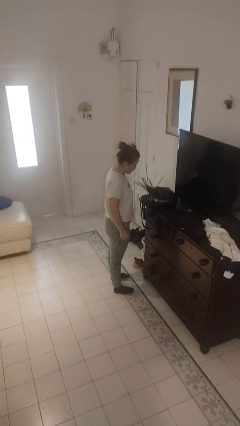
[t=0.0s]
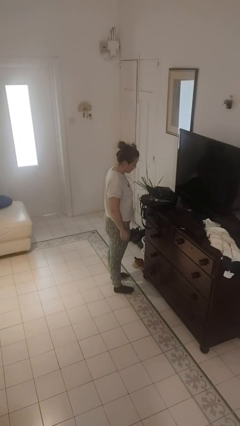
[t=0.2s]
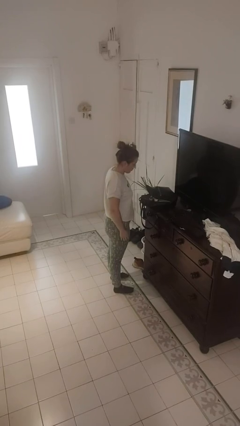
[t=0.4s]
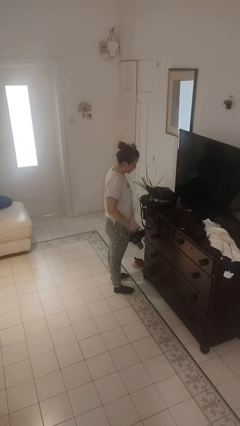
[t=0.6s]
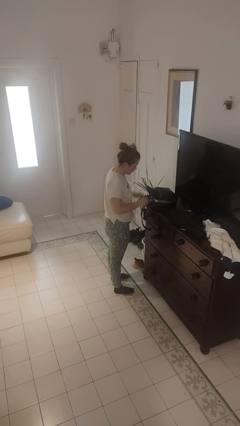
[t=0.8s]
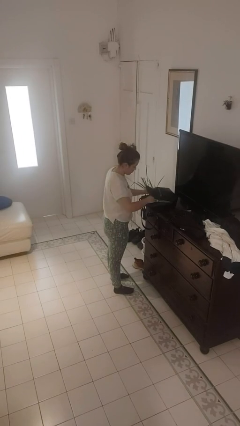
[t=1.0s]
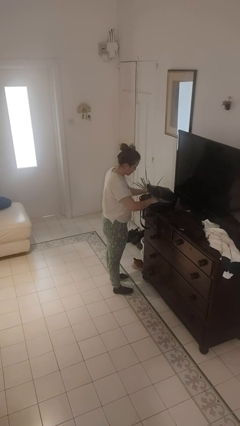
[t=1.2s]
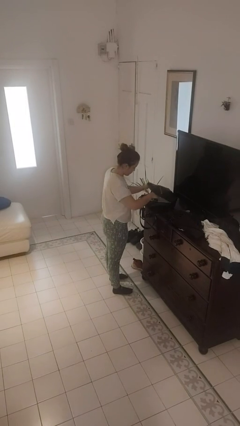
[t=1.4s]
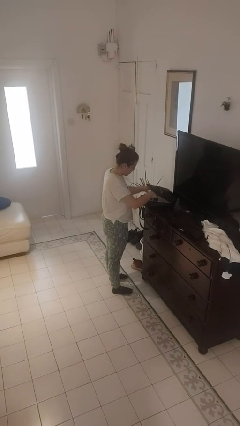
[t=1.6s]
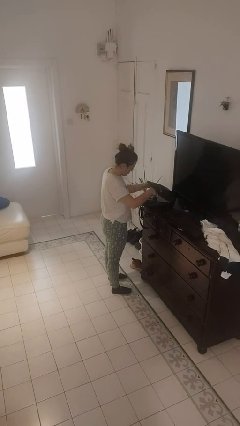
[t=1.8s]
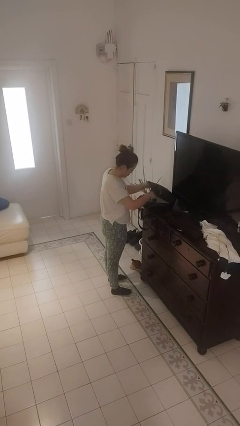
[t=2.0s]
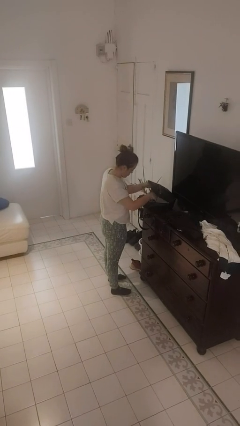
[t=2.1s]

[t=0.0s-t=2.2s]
person searches in purse

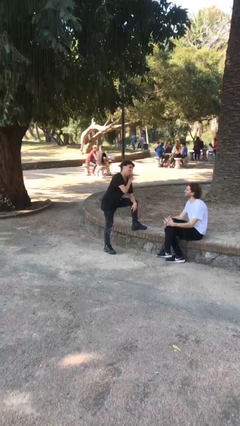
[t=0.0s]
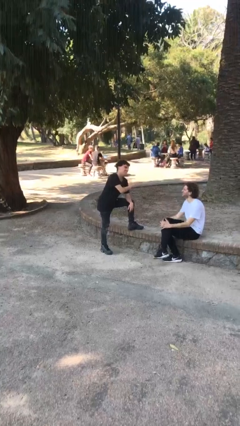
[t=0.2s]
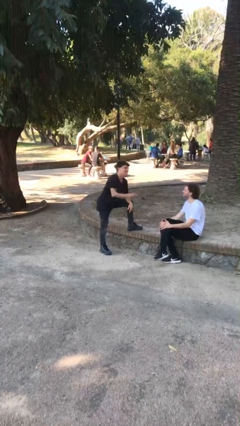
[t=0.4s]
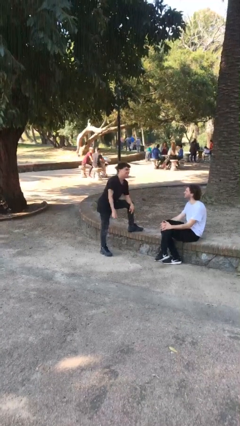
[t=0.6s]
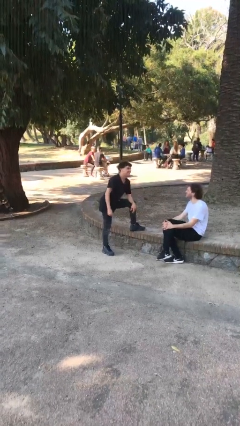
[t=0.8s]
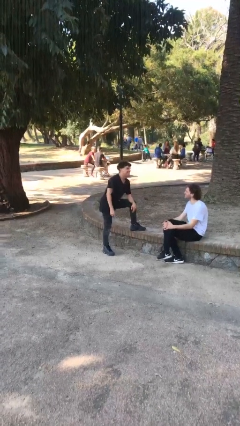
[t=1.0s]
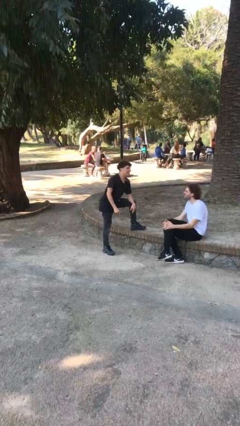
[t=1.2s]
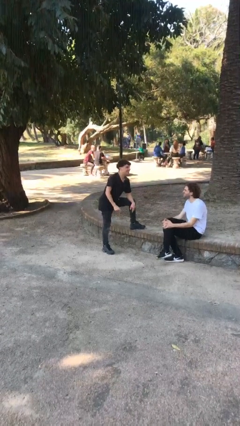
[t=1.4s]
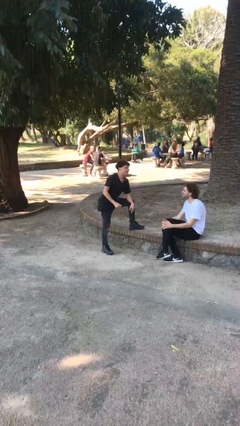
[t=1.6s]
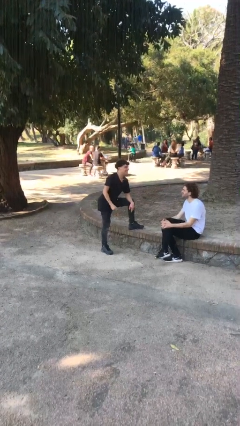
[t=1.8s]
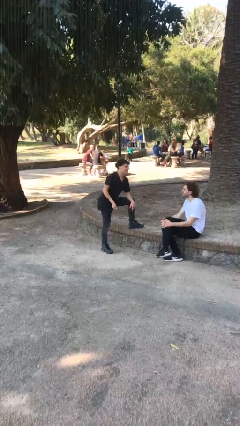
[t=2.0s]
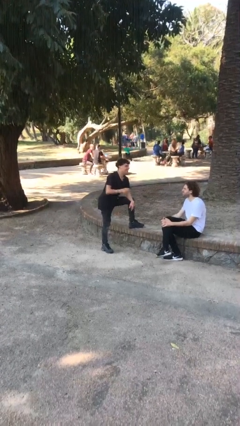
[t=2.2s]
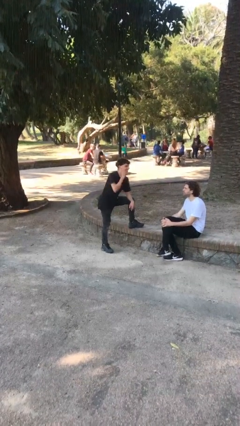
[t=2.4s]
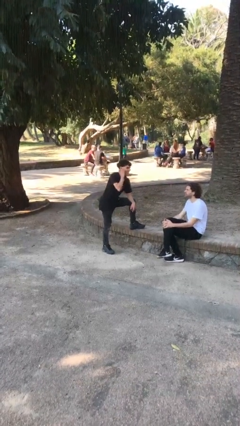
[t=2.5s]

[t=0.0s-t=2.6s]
person talks to person

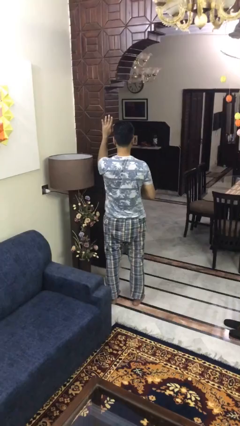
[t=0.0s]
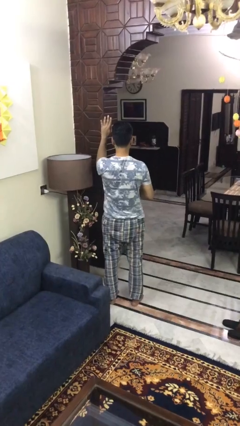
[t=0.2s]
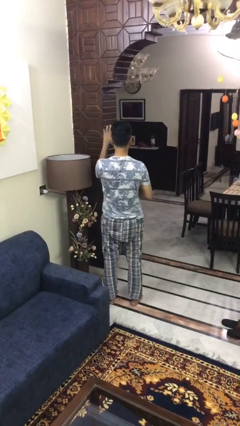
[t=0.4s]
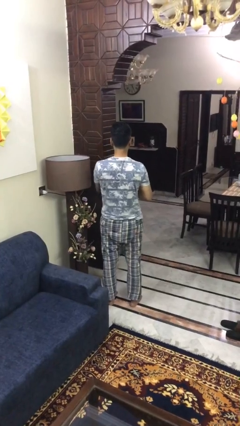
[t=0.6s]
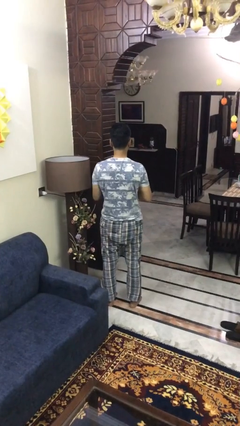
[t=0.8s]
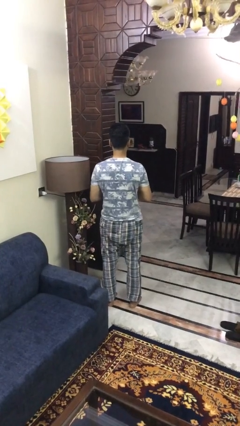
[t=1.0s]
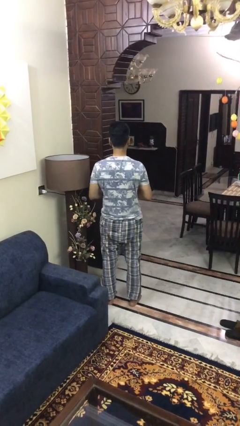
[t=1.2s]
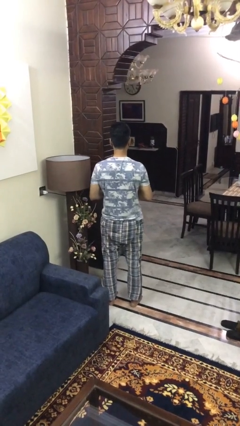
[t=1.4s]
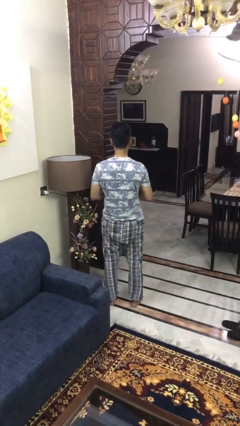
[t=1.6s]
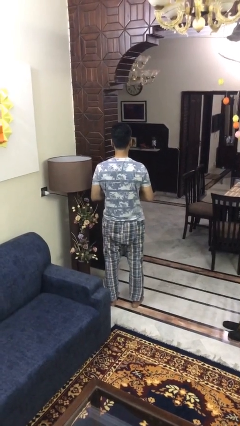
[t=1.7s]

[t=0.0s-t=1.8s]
person gestures lower hand

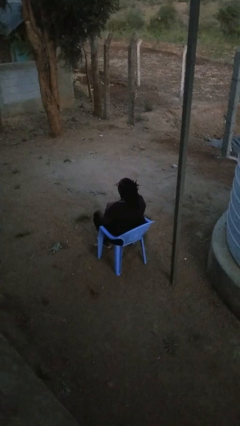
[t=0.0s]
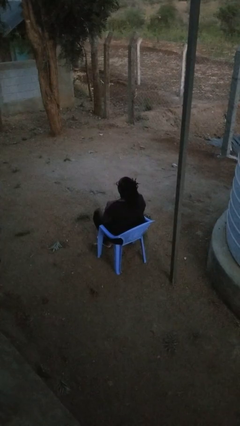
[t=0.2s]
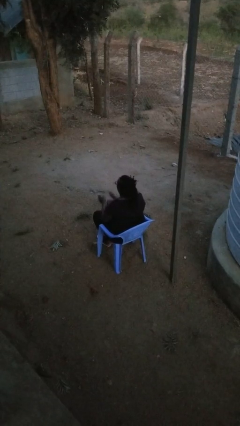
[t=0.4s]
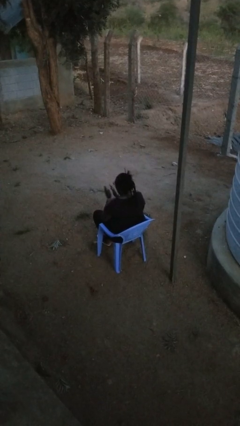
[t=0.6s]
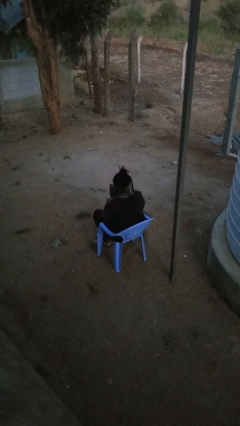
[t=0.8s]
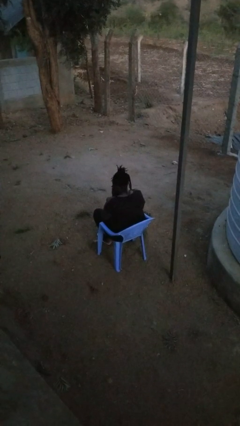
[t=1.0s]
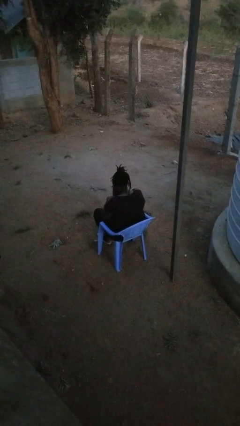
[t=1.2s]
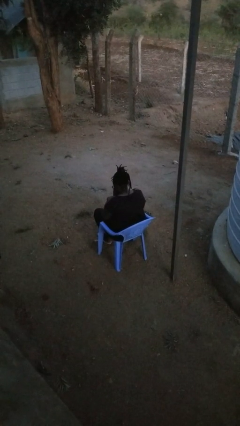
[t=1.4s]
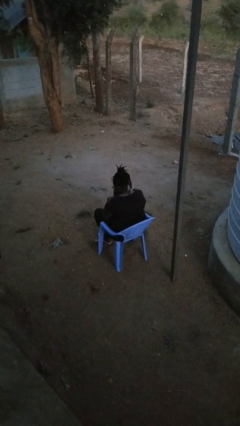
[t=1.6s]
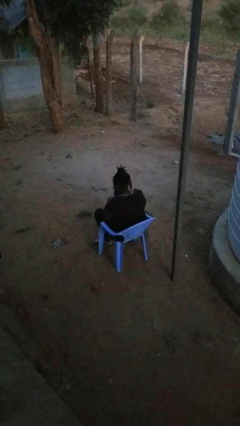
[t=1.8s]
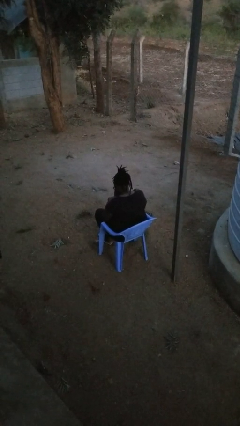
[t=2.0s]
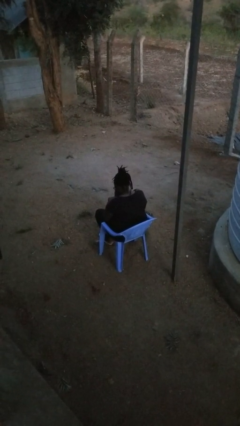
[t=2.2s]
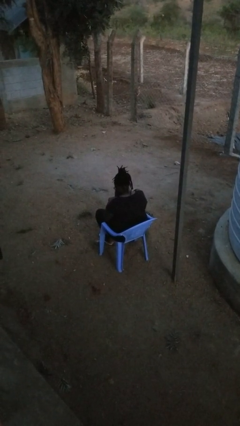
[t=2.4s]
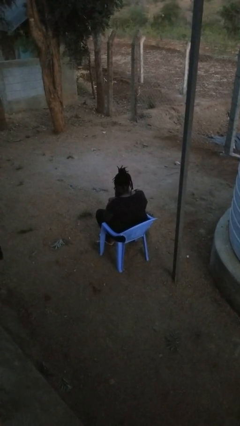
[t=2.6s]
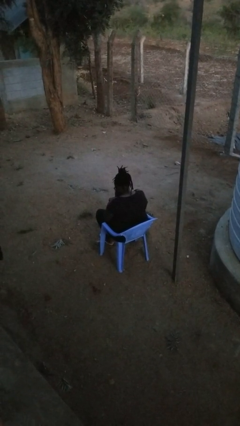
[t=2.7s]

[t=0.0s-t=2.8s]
person prays

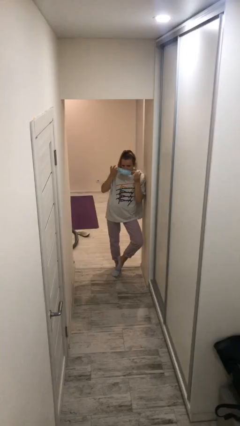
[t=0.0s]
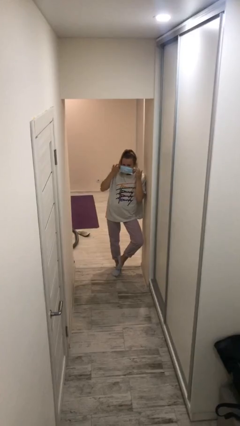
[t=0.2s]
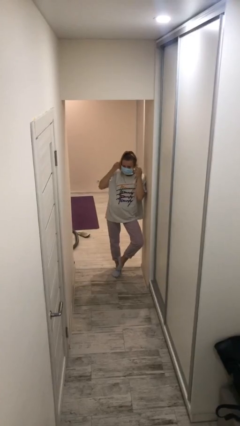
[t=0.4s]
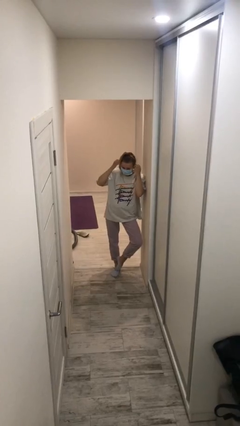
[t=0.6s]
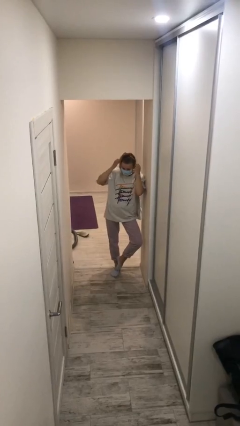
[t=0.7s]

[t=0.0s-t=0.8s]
person puts on facemask

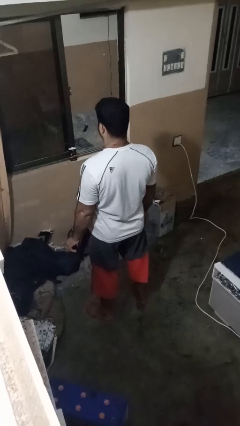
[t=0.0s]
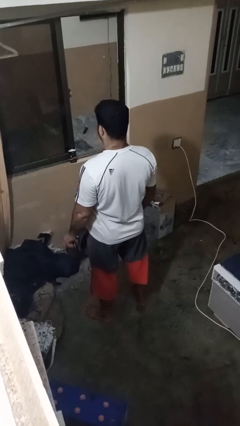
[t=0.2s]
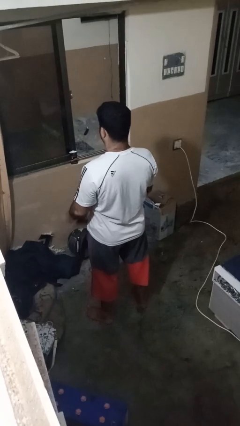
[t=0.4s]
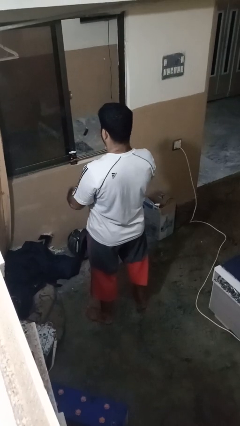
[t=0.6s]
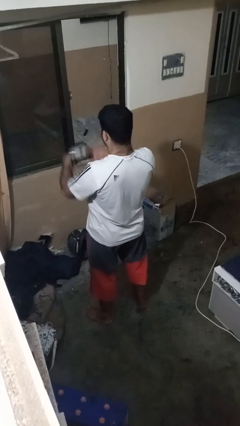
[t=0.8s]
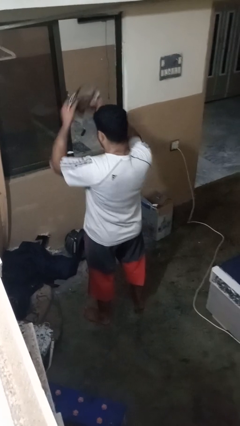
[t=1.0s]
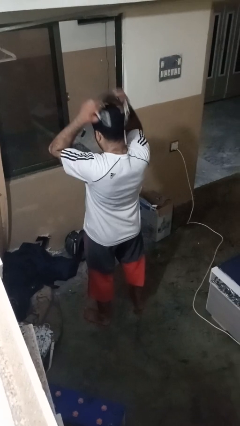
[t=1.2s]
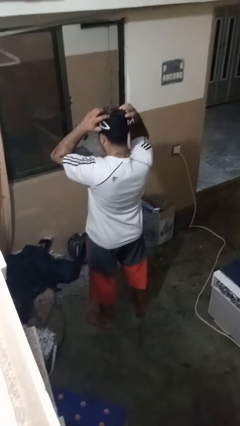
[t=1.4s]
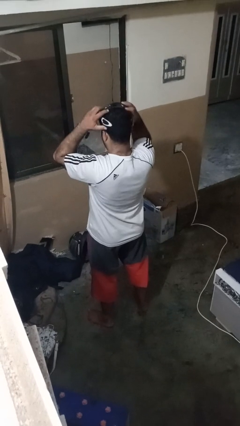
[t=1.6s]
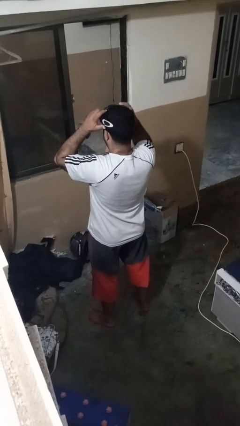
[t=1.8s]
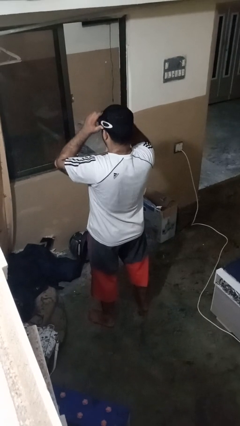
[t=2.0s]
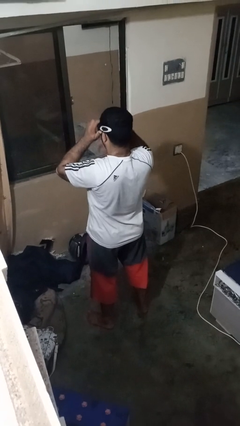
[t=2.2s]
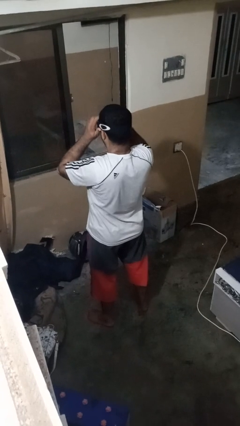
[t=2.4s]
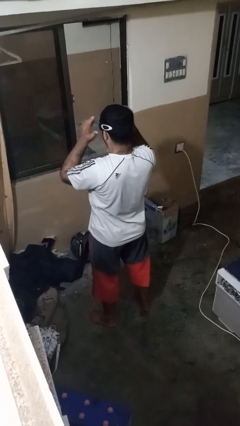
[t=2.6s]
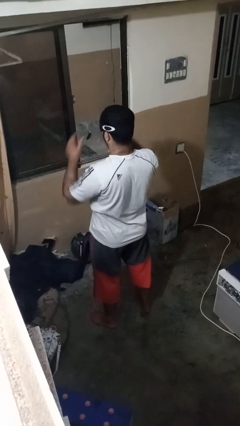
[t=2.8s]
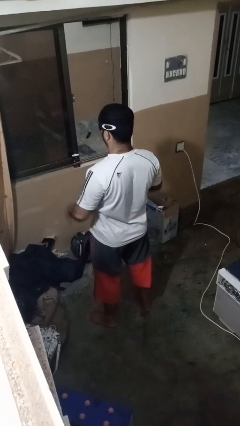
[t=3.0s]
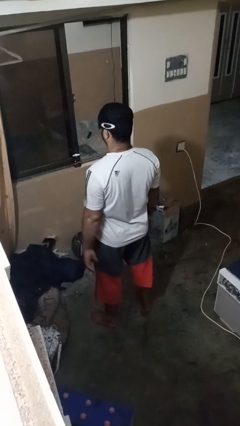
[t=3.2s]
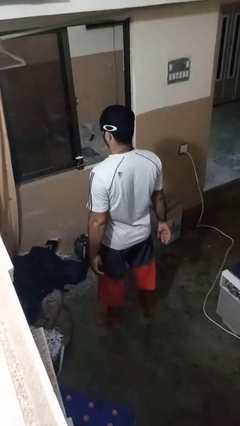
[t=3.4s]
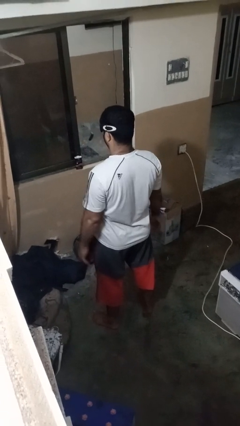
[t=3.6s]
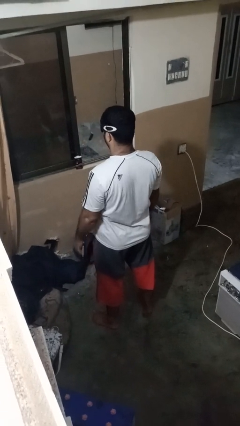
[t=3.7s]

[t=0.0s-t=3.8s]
person puts on sunglasses

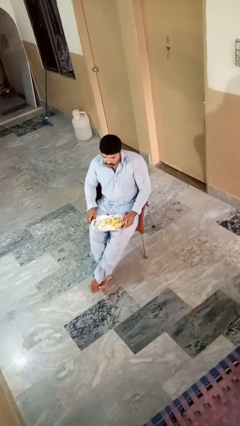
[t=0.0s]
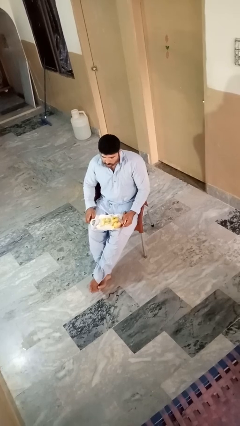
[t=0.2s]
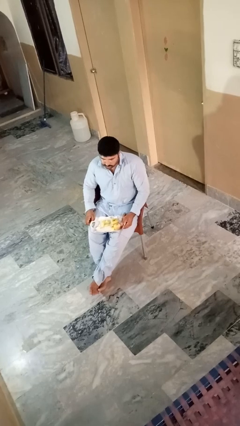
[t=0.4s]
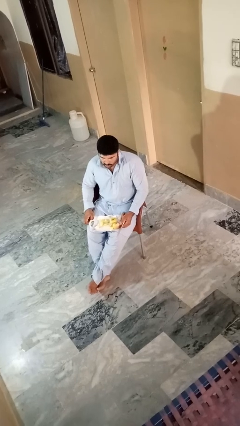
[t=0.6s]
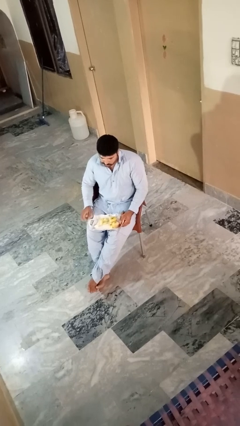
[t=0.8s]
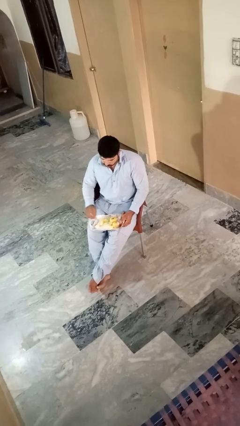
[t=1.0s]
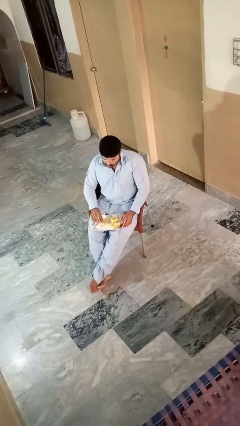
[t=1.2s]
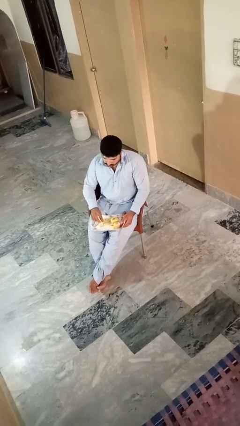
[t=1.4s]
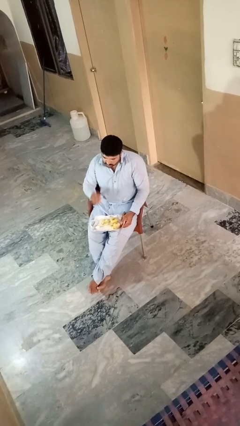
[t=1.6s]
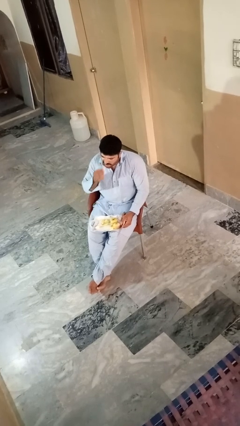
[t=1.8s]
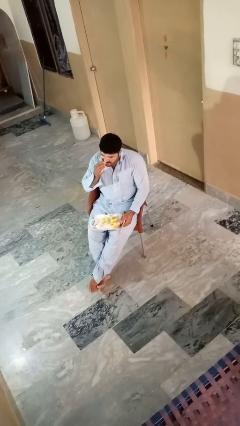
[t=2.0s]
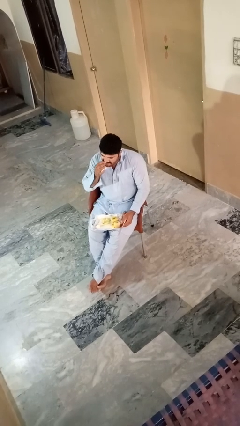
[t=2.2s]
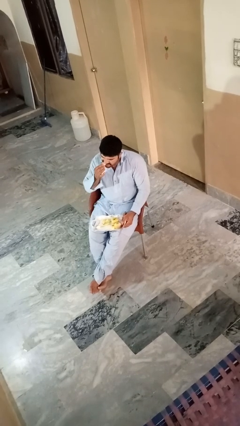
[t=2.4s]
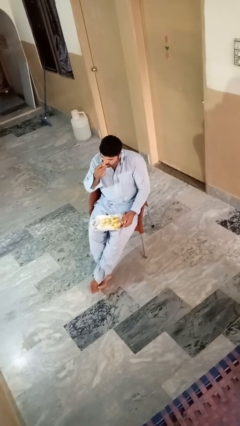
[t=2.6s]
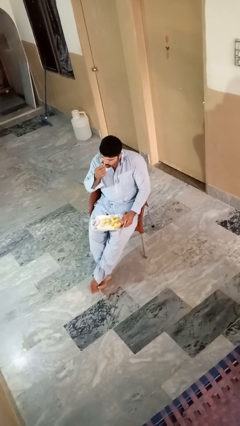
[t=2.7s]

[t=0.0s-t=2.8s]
person eats apple
